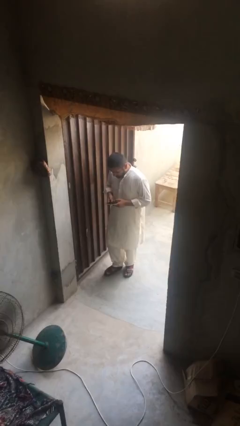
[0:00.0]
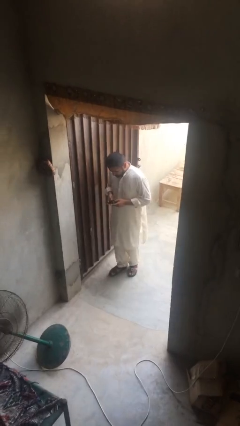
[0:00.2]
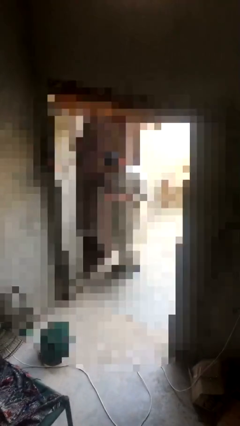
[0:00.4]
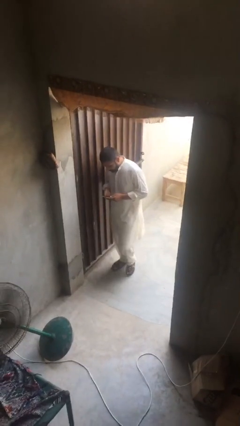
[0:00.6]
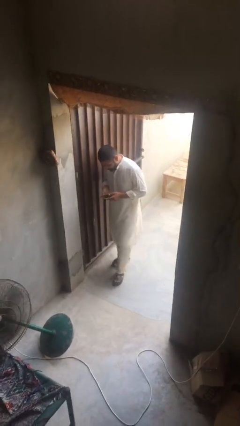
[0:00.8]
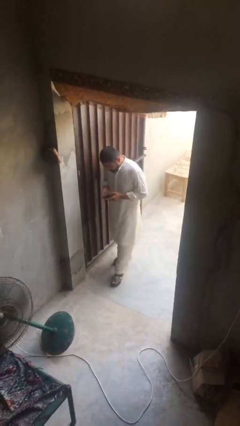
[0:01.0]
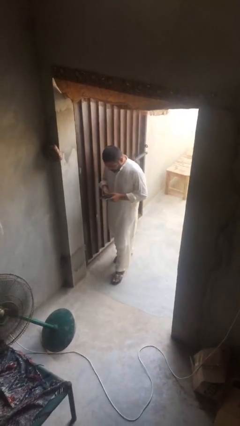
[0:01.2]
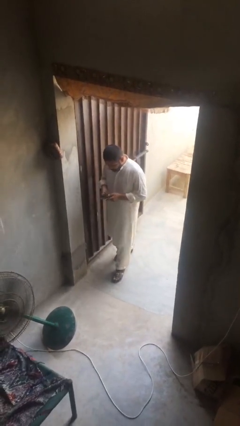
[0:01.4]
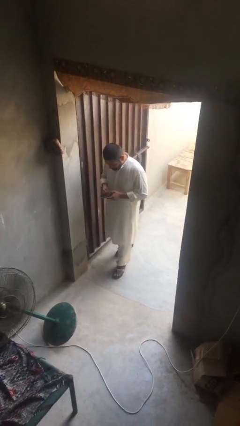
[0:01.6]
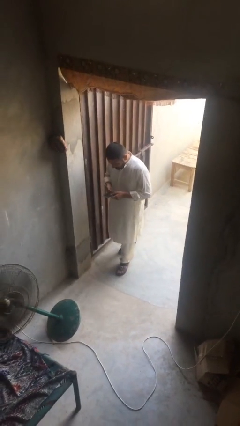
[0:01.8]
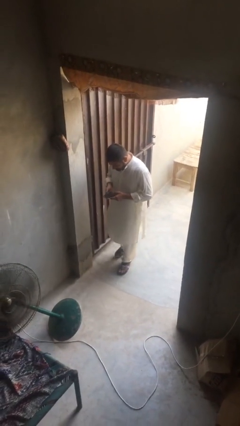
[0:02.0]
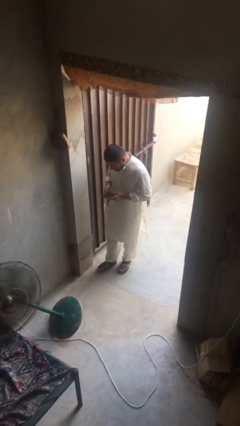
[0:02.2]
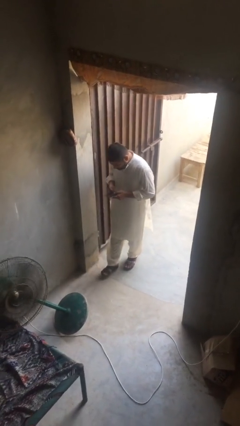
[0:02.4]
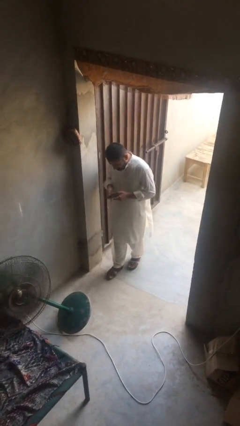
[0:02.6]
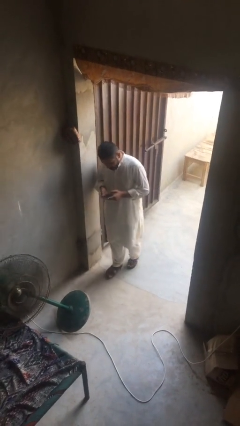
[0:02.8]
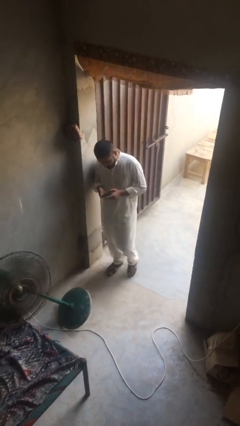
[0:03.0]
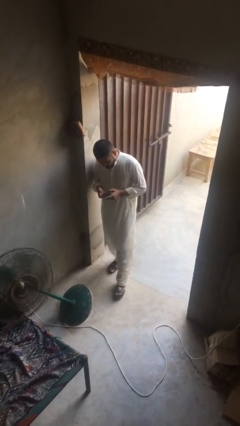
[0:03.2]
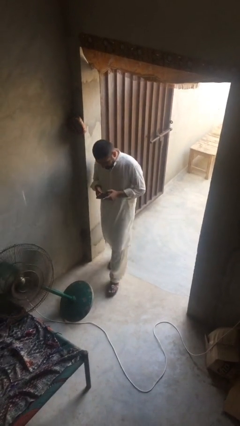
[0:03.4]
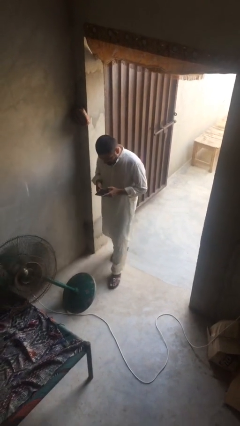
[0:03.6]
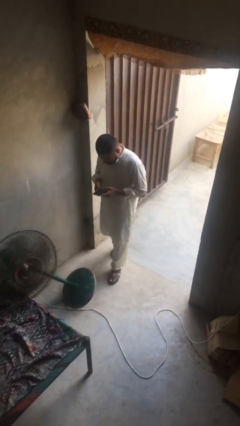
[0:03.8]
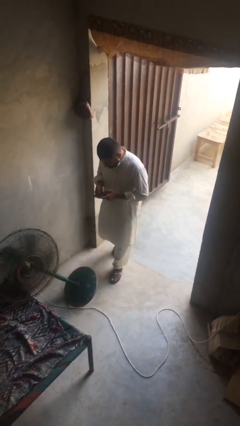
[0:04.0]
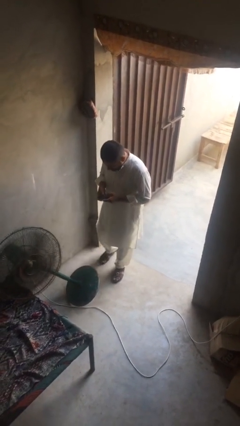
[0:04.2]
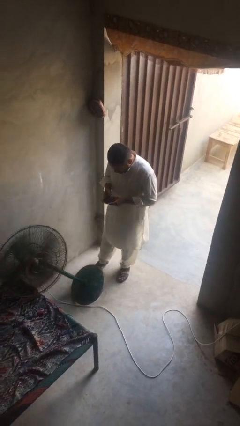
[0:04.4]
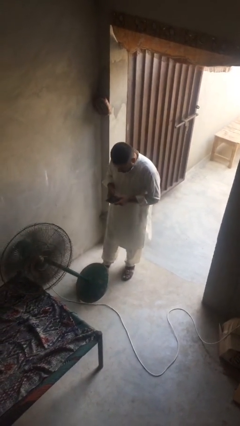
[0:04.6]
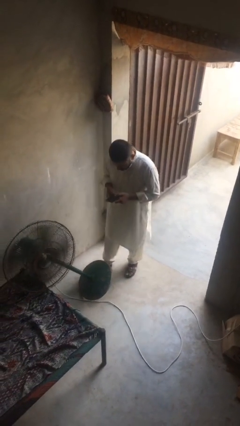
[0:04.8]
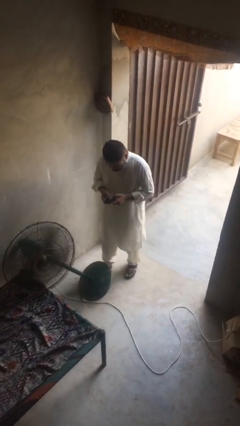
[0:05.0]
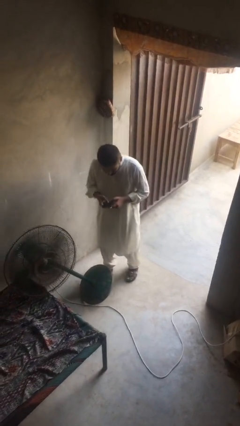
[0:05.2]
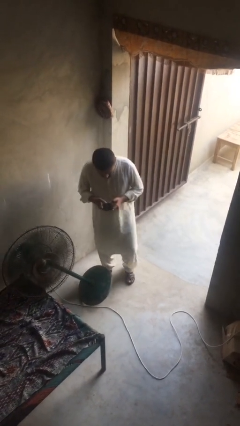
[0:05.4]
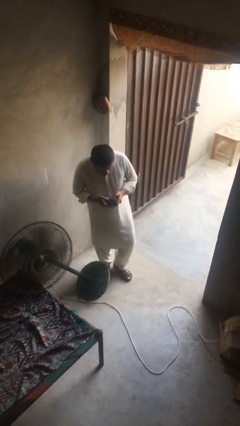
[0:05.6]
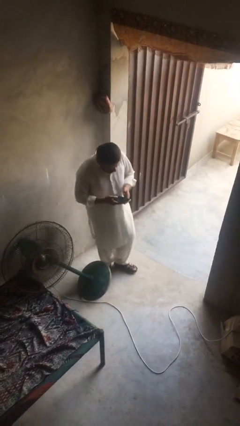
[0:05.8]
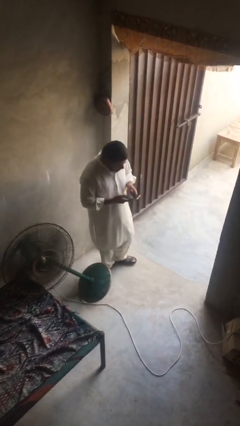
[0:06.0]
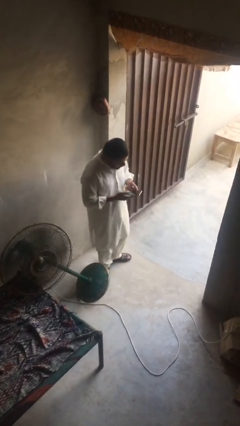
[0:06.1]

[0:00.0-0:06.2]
person texts on phone

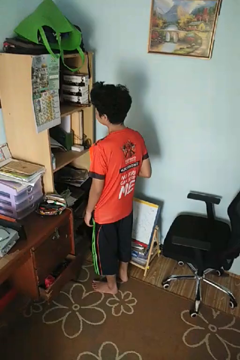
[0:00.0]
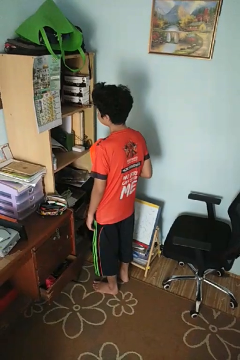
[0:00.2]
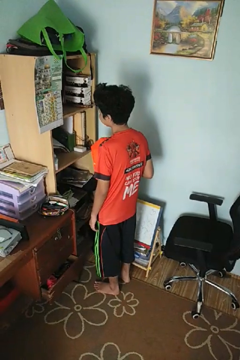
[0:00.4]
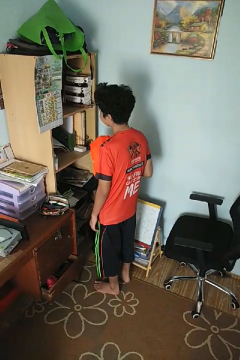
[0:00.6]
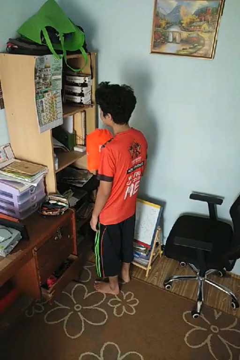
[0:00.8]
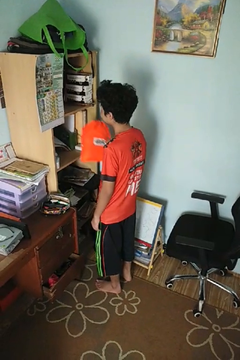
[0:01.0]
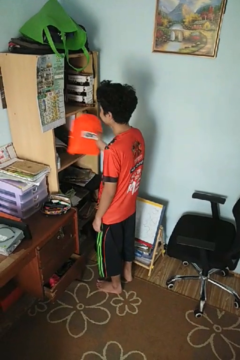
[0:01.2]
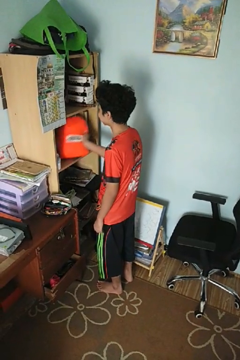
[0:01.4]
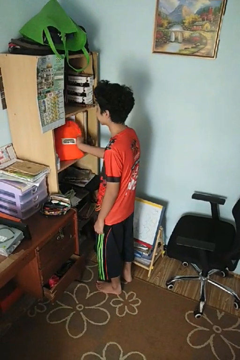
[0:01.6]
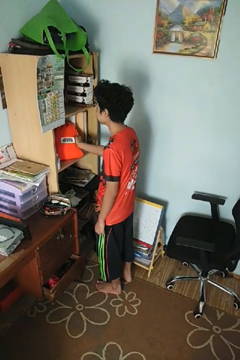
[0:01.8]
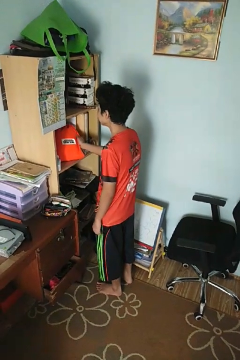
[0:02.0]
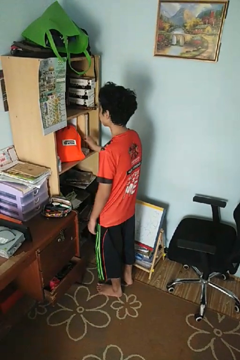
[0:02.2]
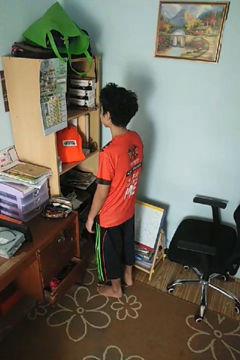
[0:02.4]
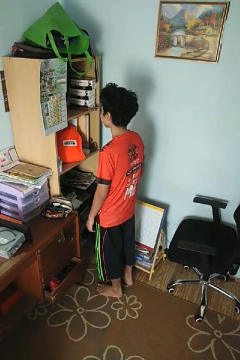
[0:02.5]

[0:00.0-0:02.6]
person puts down object into cabinet

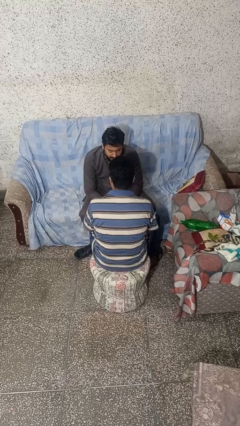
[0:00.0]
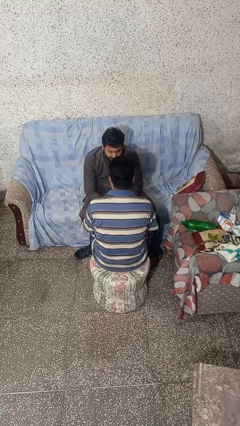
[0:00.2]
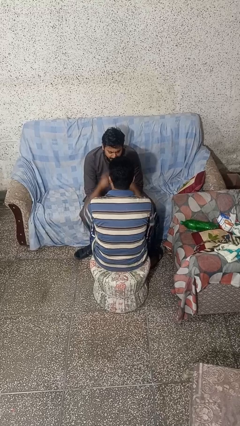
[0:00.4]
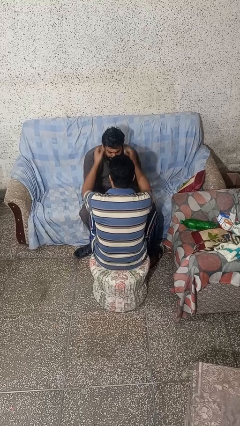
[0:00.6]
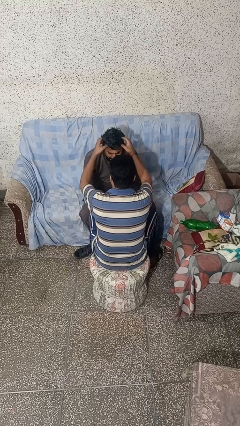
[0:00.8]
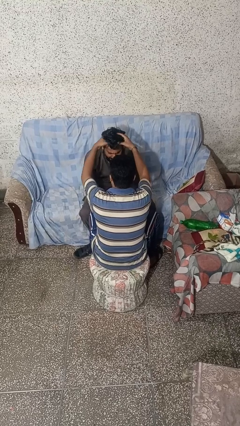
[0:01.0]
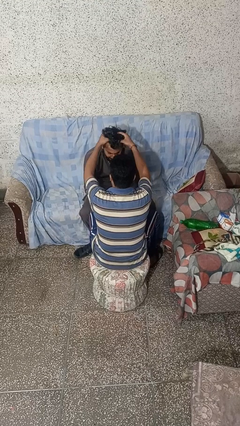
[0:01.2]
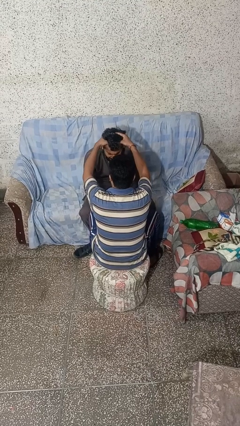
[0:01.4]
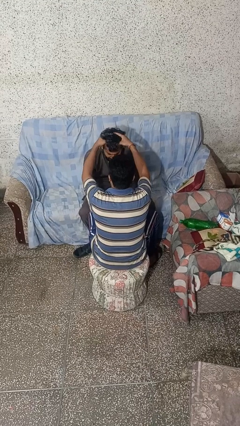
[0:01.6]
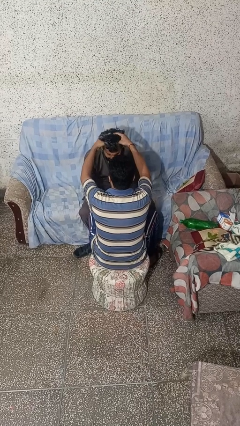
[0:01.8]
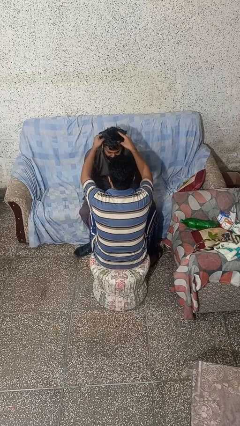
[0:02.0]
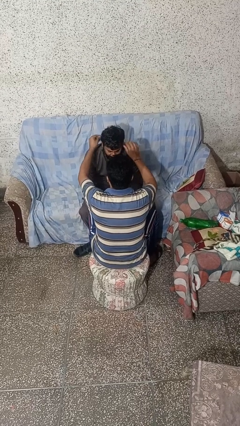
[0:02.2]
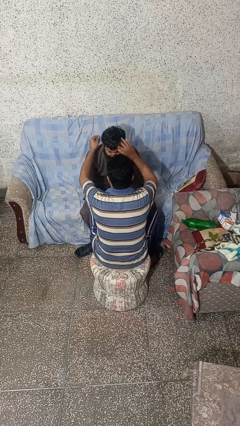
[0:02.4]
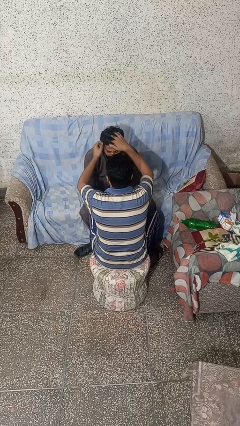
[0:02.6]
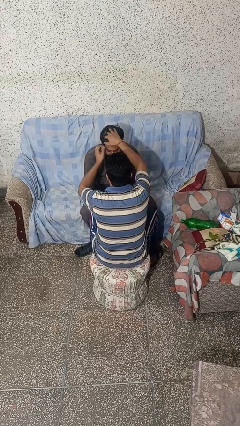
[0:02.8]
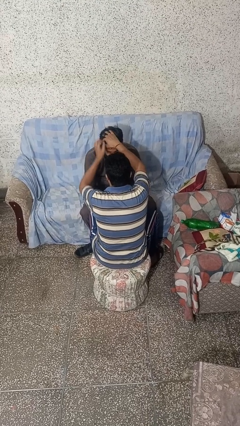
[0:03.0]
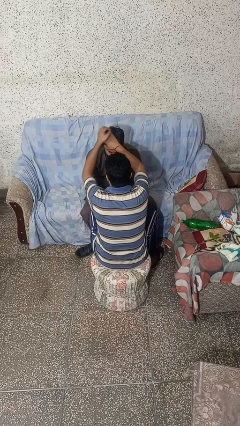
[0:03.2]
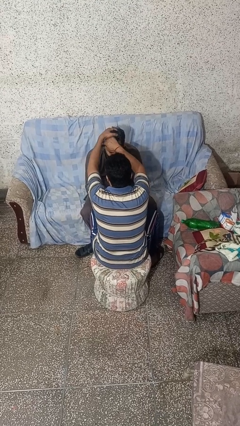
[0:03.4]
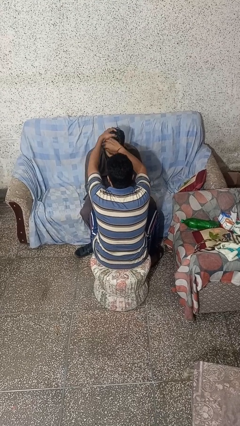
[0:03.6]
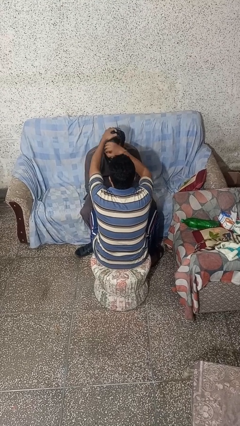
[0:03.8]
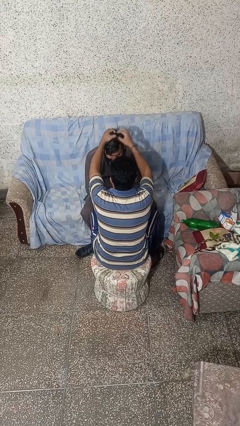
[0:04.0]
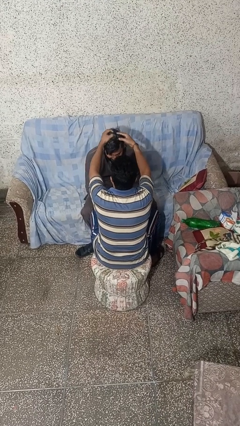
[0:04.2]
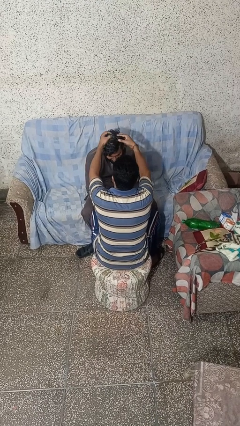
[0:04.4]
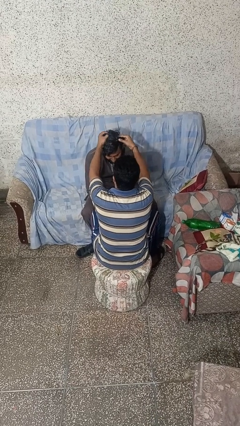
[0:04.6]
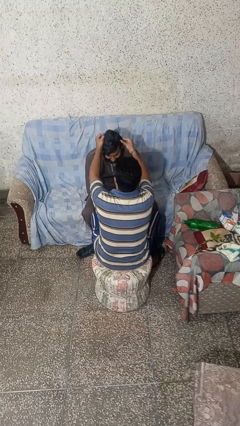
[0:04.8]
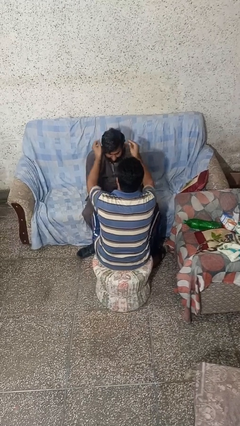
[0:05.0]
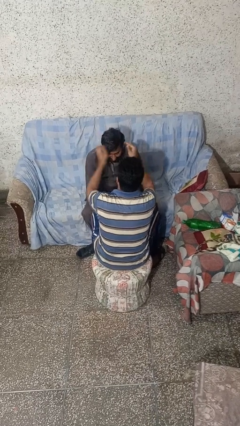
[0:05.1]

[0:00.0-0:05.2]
person braids hair of person

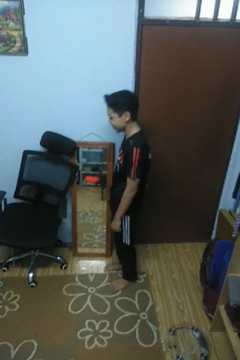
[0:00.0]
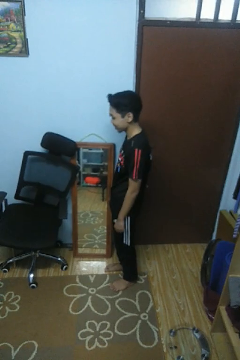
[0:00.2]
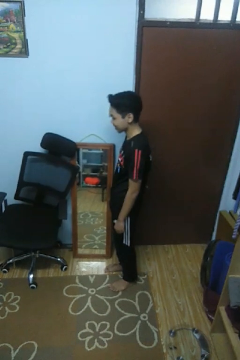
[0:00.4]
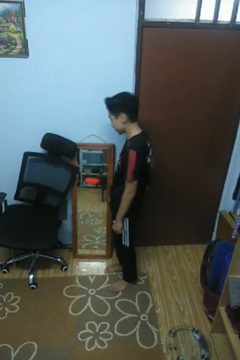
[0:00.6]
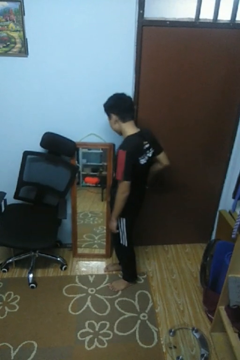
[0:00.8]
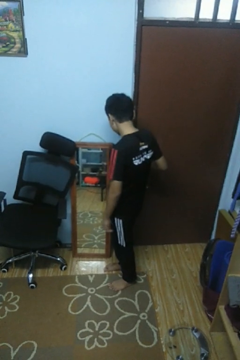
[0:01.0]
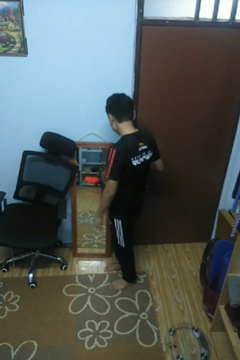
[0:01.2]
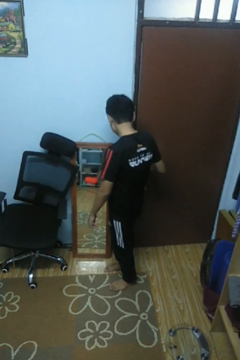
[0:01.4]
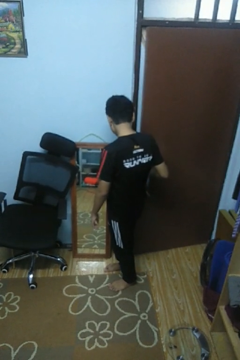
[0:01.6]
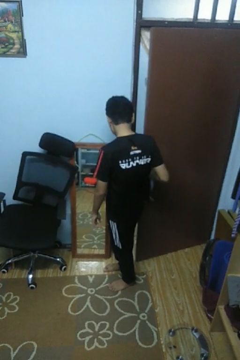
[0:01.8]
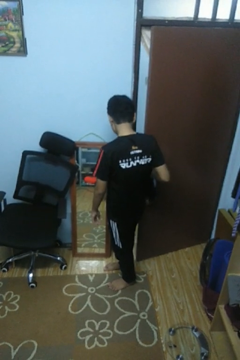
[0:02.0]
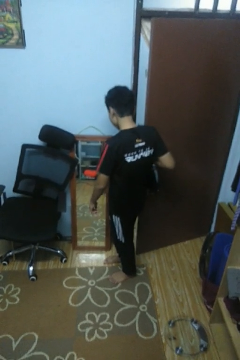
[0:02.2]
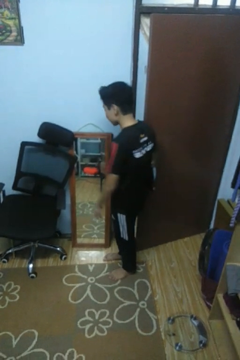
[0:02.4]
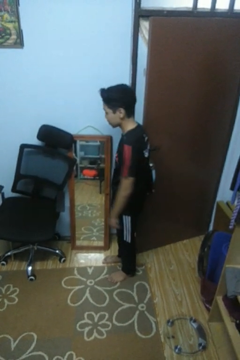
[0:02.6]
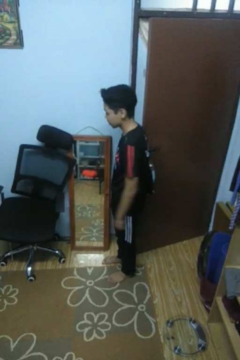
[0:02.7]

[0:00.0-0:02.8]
person opens facility door

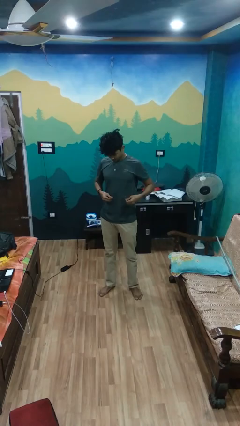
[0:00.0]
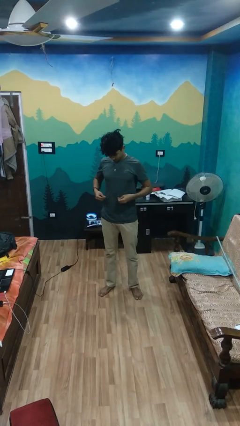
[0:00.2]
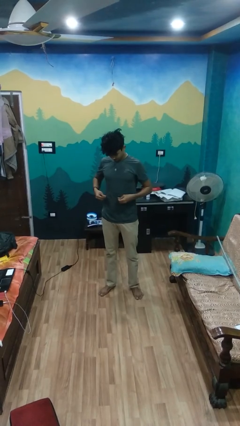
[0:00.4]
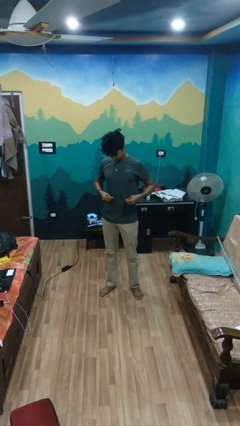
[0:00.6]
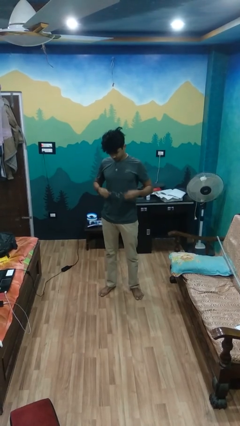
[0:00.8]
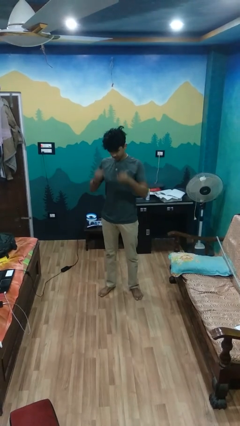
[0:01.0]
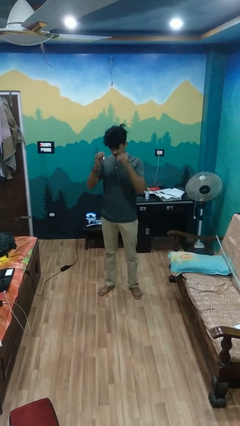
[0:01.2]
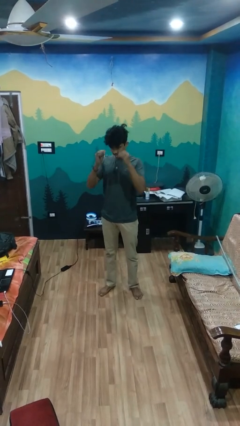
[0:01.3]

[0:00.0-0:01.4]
person cleans eyeglasses
